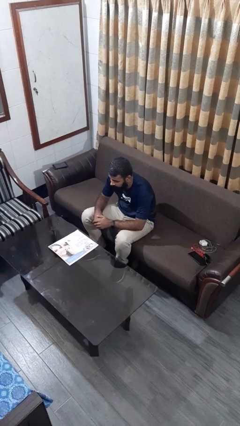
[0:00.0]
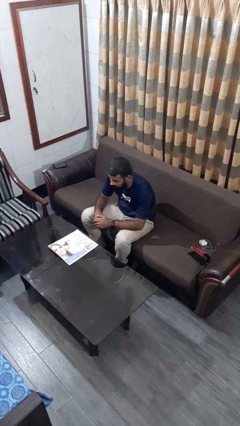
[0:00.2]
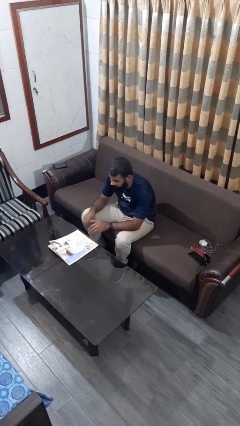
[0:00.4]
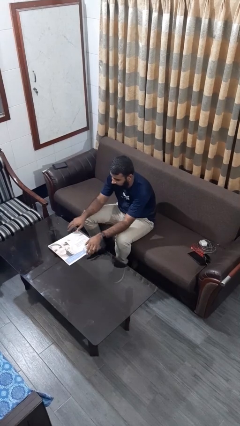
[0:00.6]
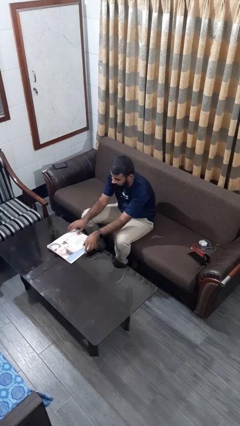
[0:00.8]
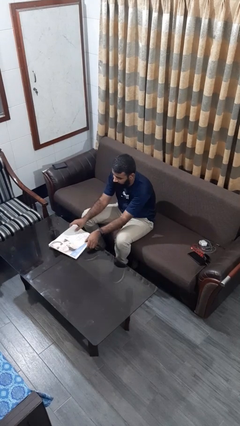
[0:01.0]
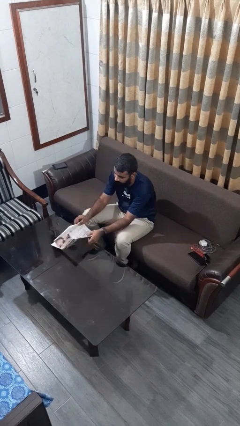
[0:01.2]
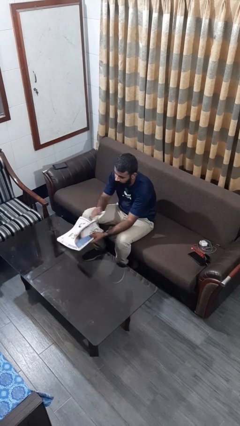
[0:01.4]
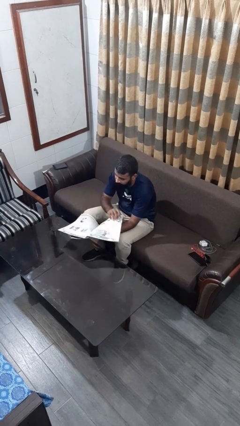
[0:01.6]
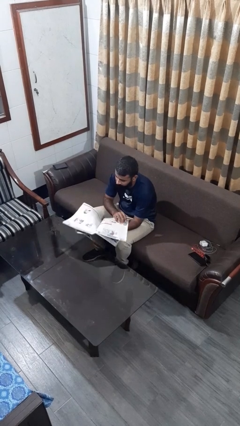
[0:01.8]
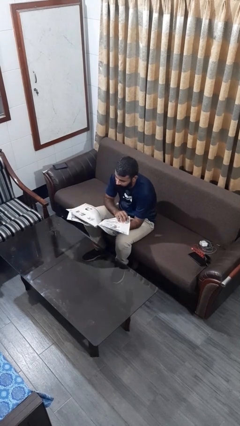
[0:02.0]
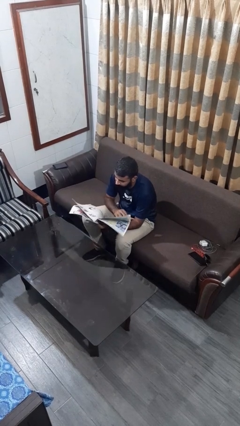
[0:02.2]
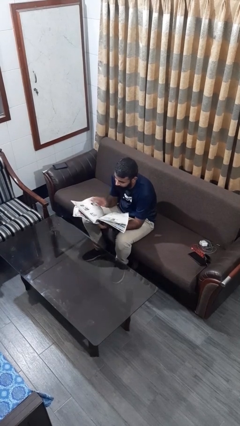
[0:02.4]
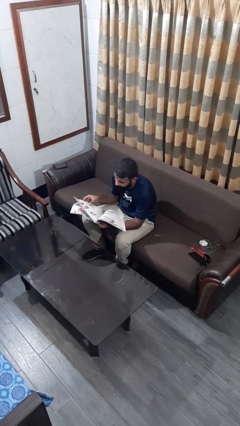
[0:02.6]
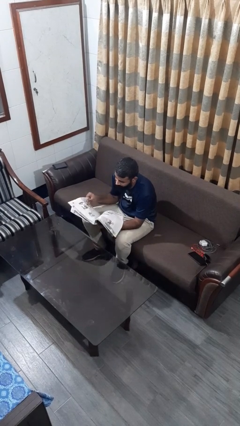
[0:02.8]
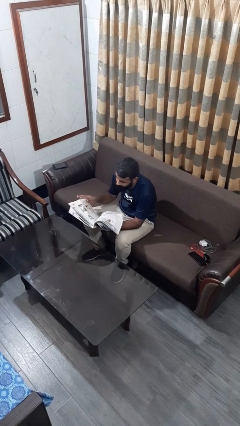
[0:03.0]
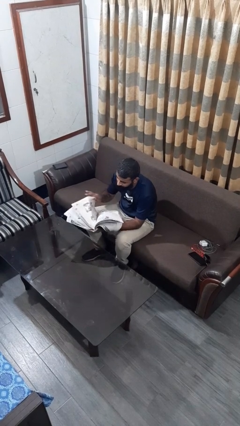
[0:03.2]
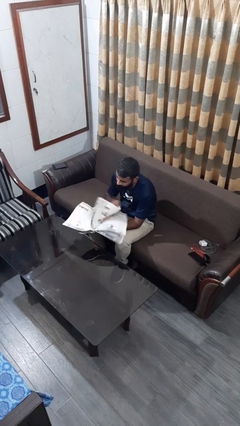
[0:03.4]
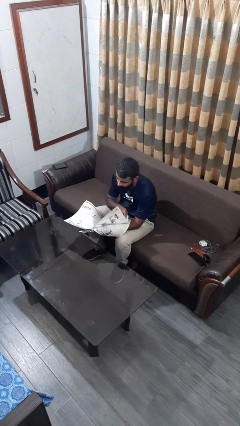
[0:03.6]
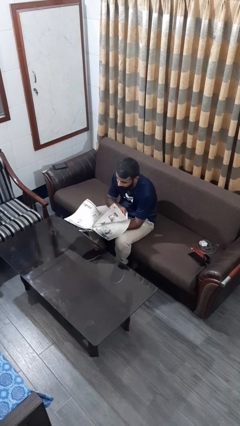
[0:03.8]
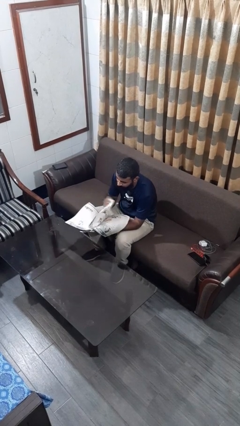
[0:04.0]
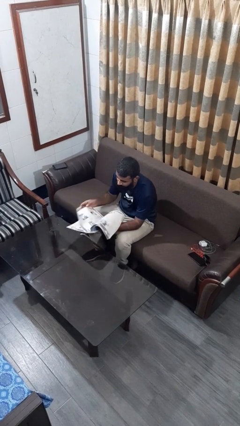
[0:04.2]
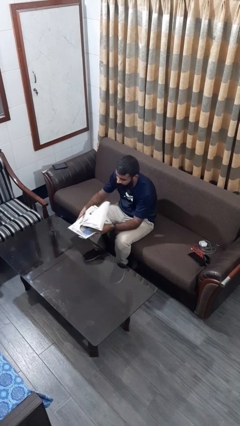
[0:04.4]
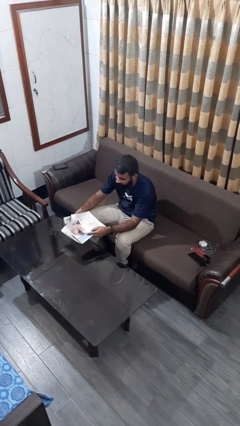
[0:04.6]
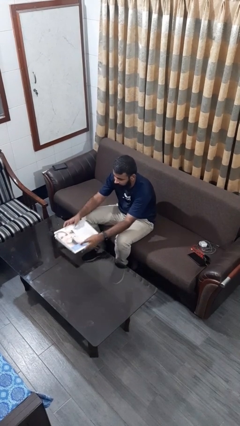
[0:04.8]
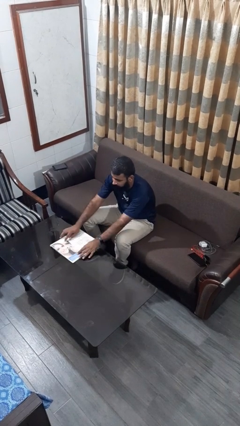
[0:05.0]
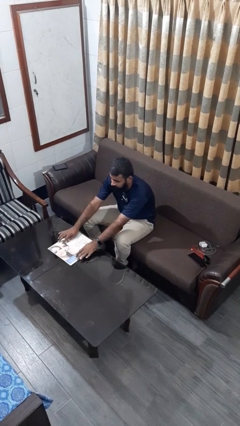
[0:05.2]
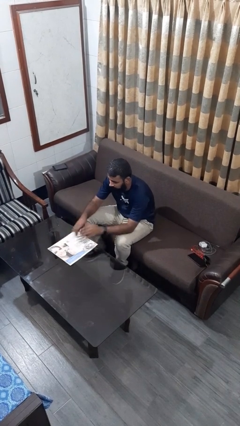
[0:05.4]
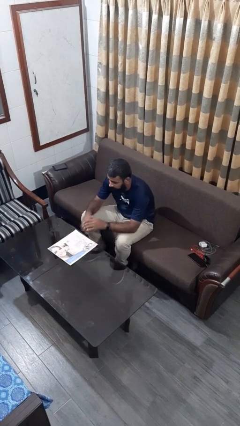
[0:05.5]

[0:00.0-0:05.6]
person reads magazine

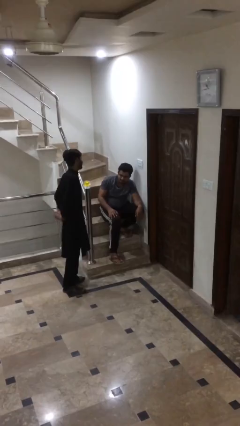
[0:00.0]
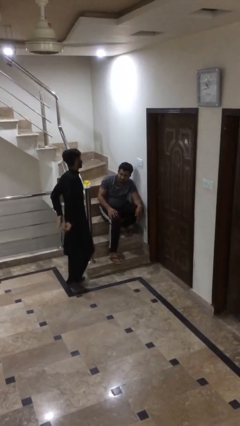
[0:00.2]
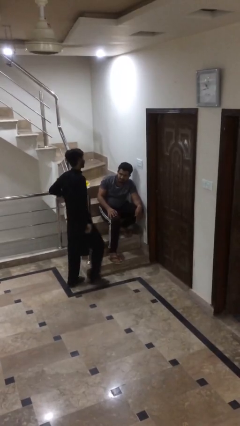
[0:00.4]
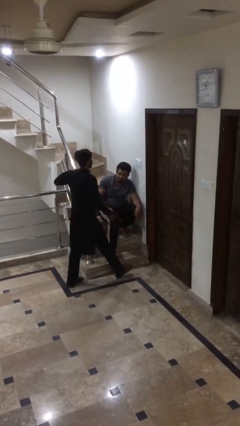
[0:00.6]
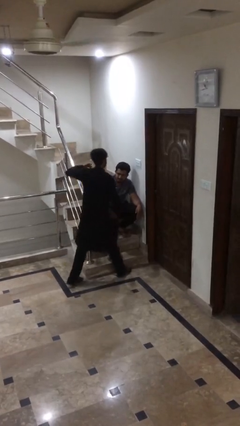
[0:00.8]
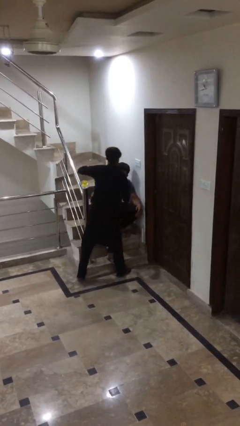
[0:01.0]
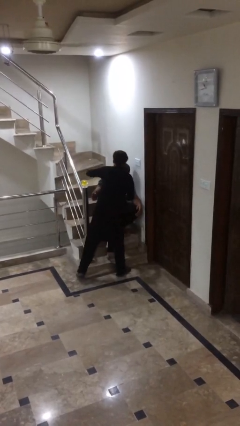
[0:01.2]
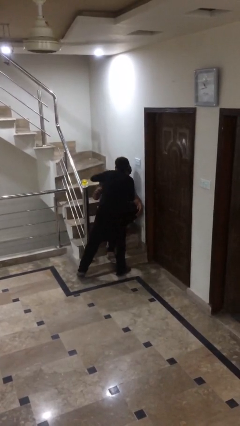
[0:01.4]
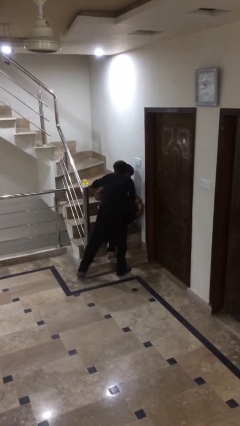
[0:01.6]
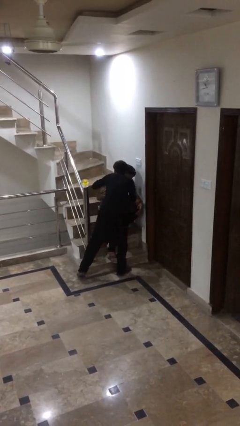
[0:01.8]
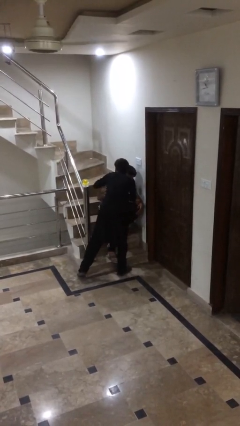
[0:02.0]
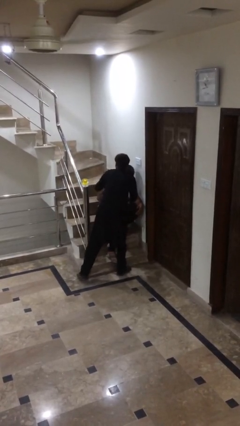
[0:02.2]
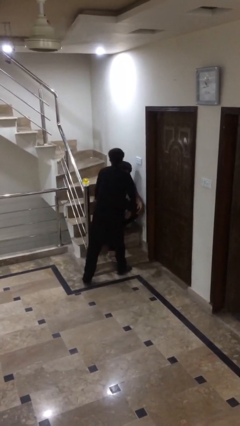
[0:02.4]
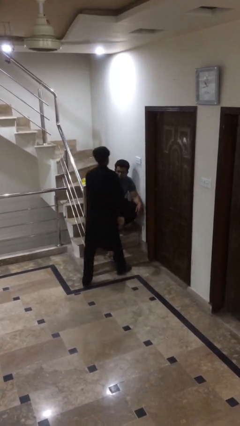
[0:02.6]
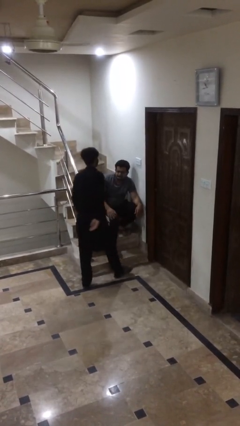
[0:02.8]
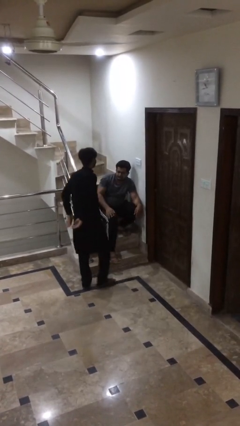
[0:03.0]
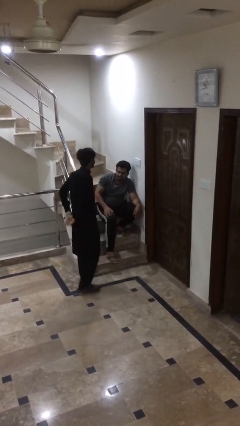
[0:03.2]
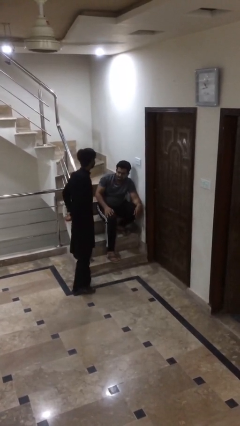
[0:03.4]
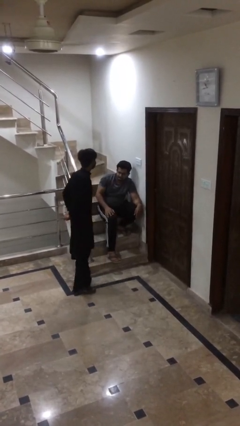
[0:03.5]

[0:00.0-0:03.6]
person embraces person

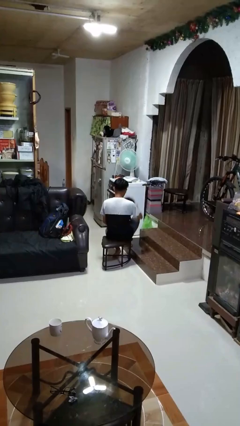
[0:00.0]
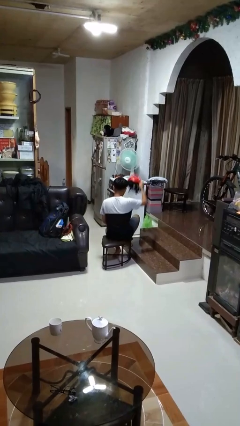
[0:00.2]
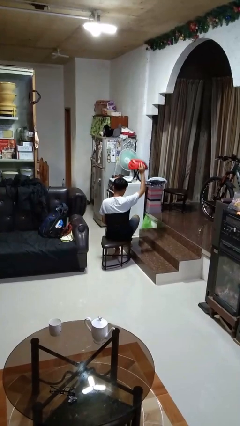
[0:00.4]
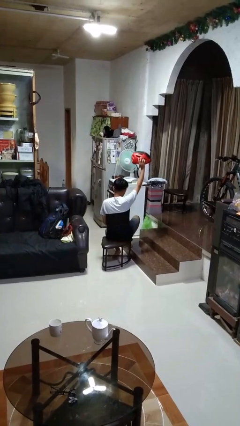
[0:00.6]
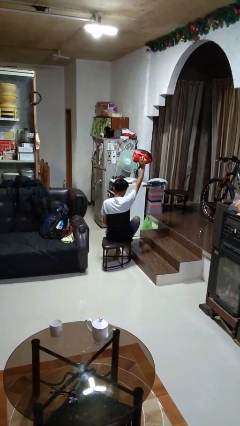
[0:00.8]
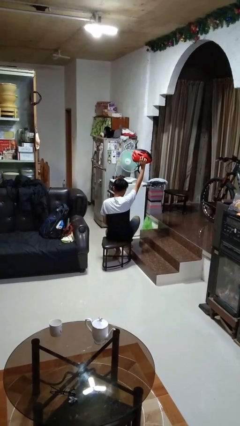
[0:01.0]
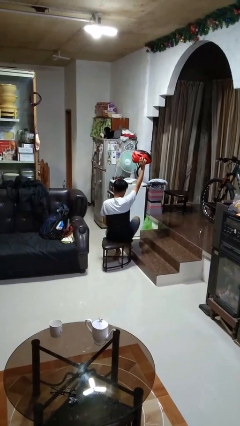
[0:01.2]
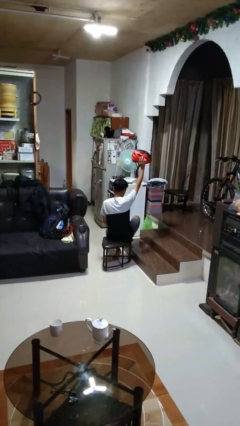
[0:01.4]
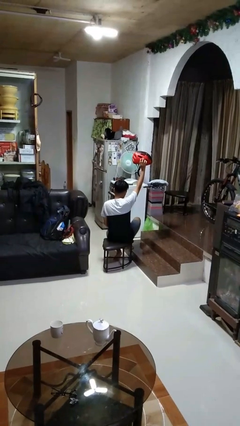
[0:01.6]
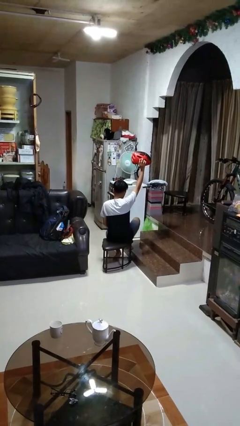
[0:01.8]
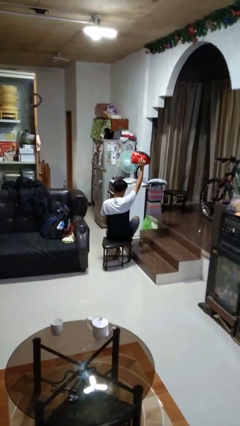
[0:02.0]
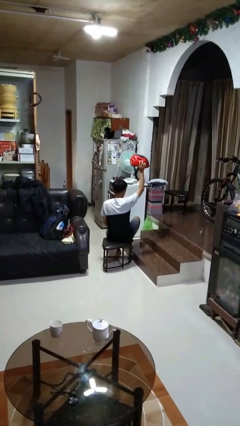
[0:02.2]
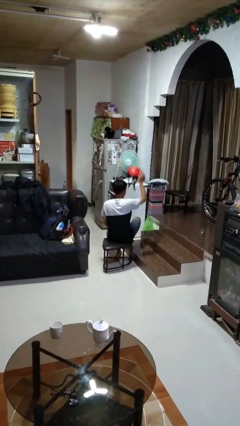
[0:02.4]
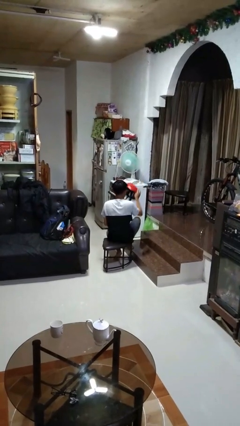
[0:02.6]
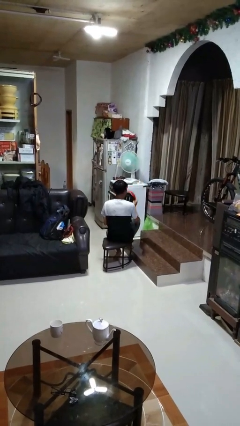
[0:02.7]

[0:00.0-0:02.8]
person holds object above head

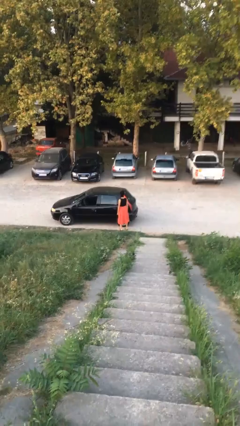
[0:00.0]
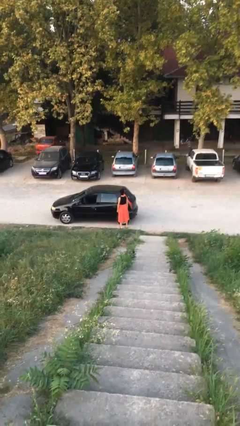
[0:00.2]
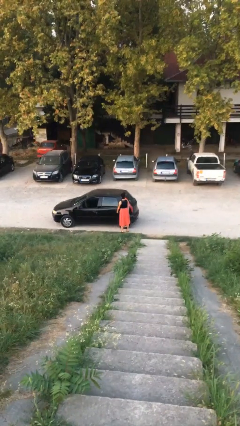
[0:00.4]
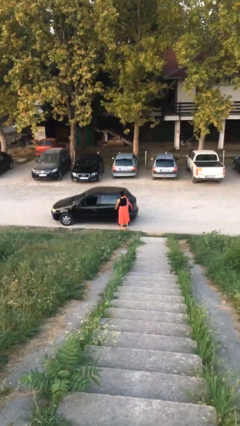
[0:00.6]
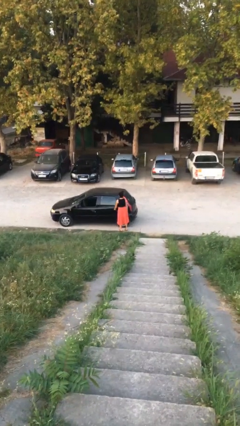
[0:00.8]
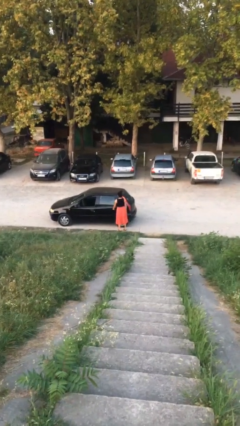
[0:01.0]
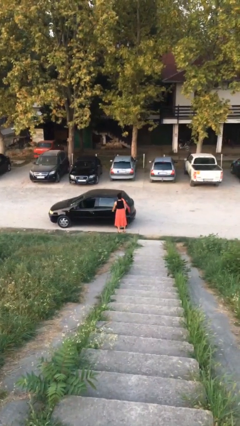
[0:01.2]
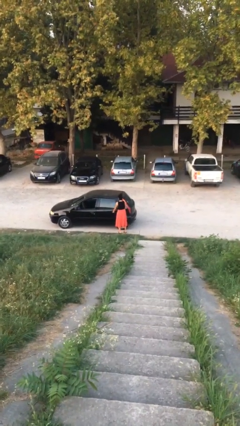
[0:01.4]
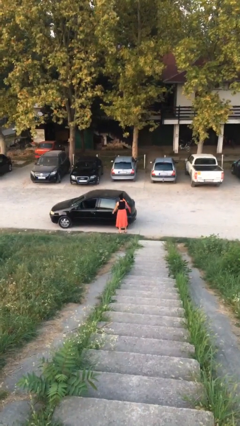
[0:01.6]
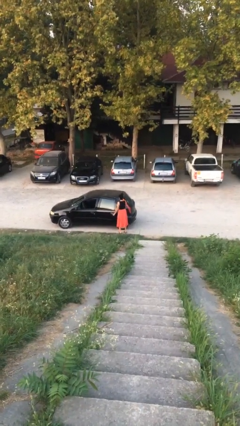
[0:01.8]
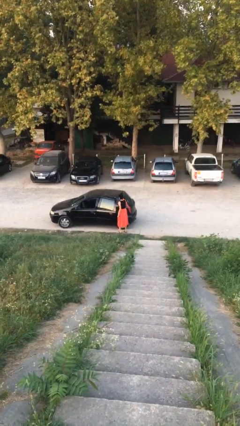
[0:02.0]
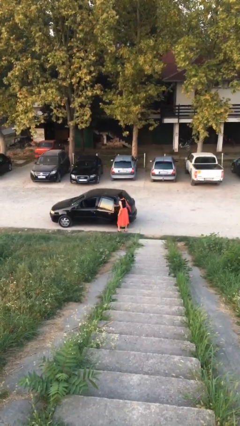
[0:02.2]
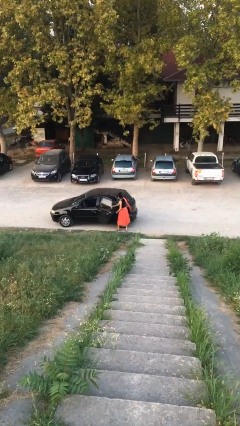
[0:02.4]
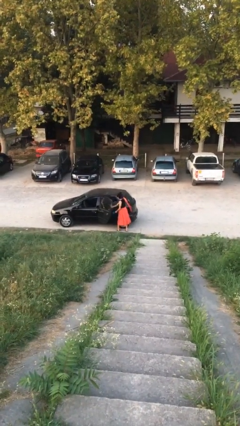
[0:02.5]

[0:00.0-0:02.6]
person opens car door

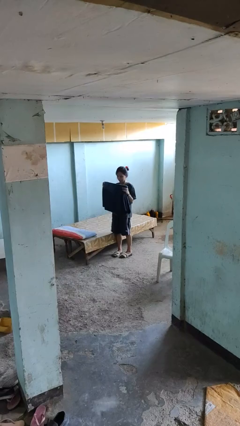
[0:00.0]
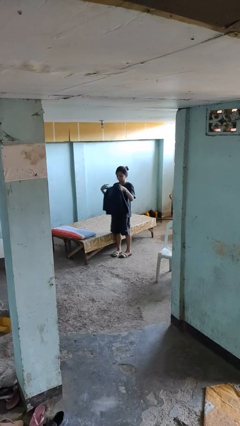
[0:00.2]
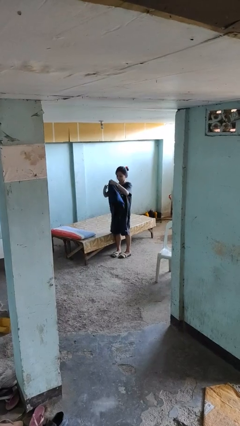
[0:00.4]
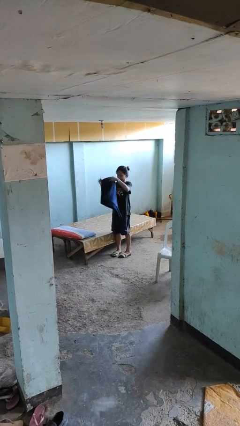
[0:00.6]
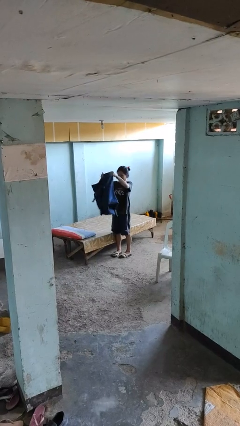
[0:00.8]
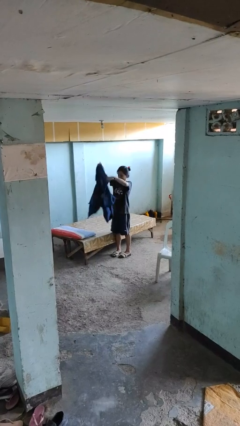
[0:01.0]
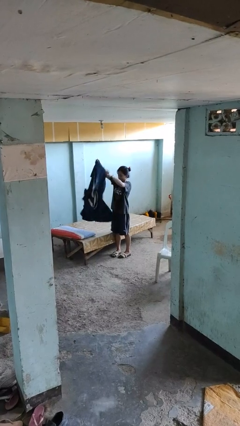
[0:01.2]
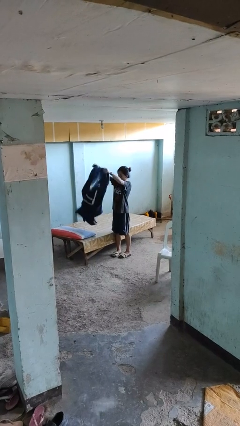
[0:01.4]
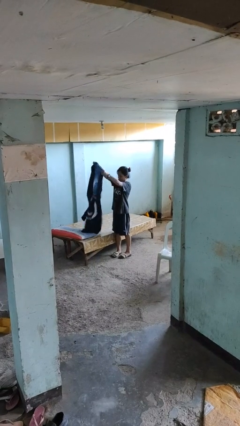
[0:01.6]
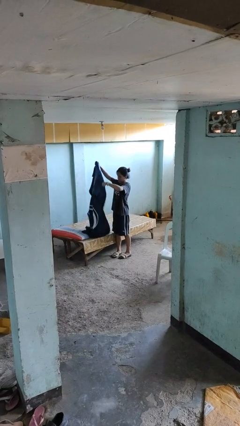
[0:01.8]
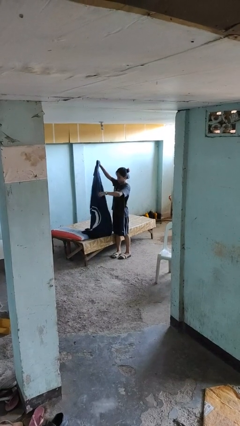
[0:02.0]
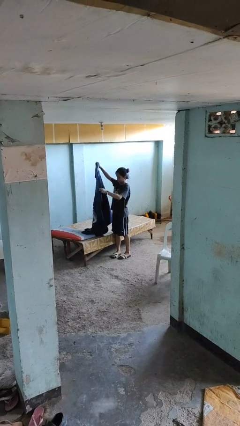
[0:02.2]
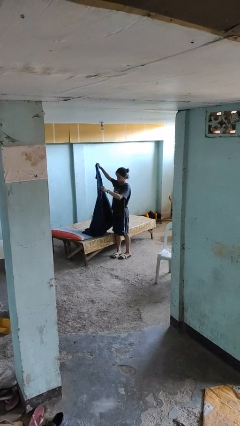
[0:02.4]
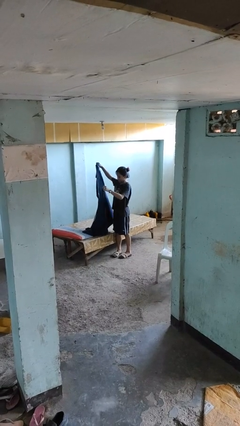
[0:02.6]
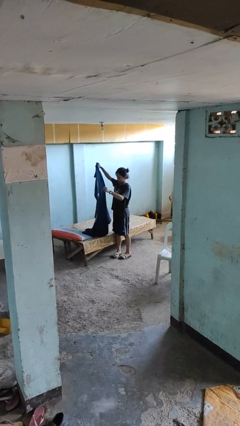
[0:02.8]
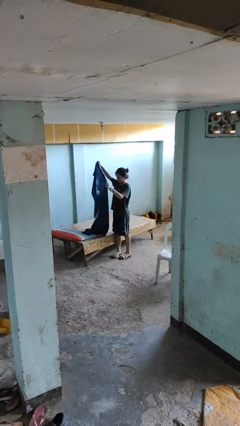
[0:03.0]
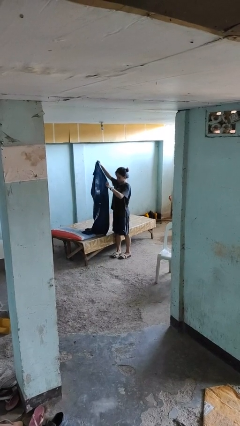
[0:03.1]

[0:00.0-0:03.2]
person unfolds blanket
